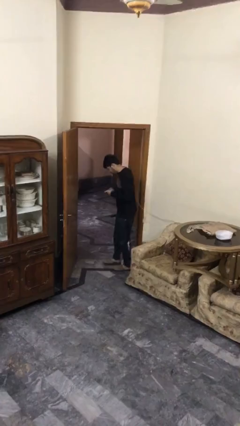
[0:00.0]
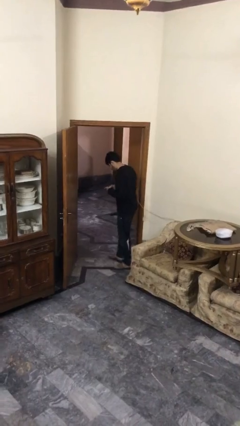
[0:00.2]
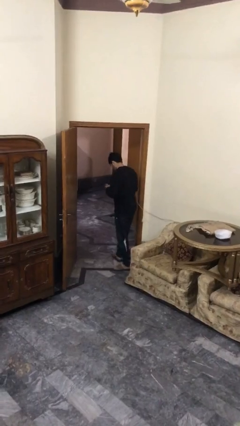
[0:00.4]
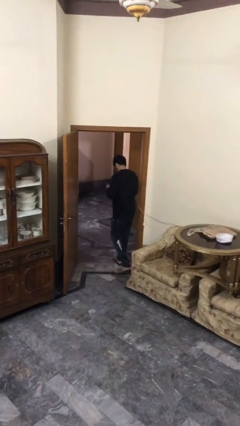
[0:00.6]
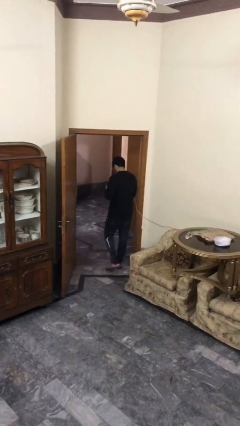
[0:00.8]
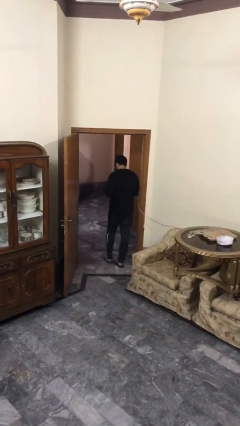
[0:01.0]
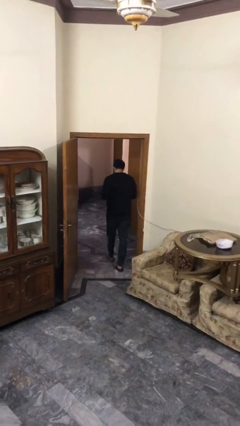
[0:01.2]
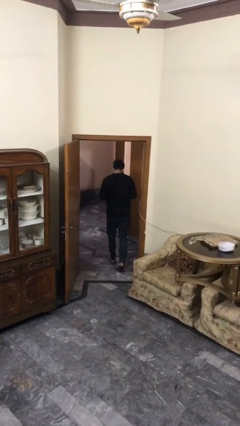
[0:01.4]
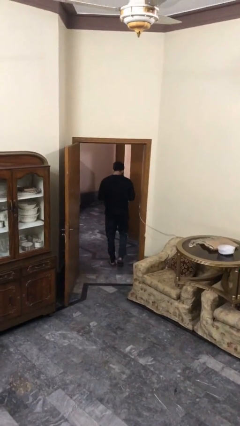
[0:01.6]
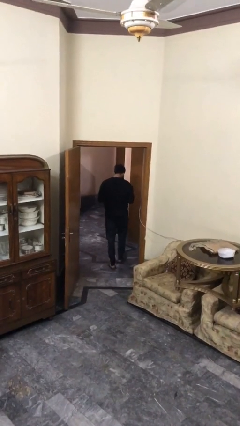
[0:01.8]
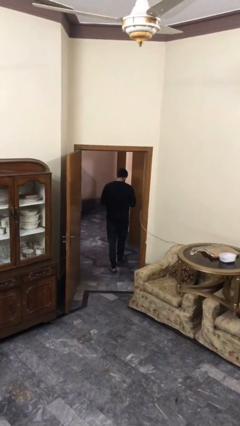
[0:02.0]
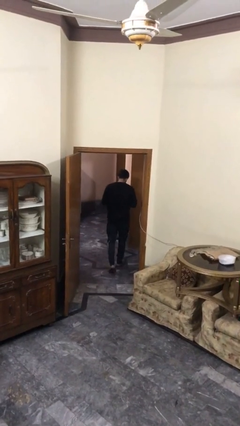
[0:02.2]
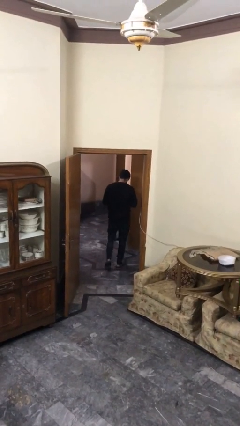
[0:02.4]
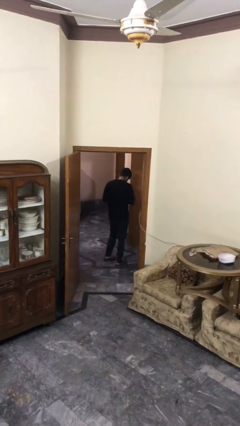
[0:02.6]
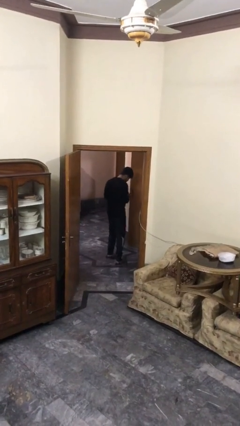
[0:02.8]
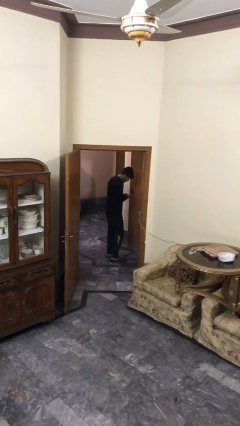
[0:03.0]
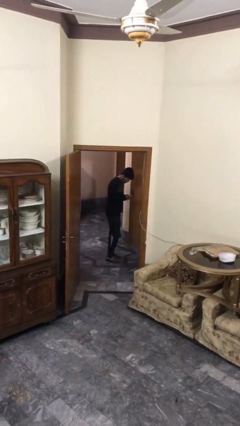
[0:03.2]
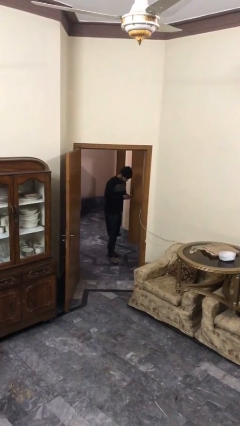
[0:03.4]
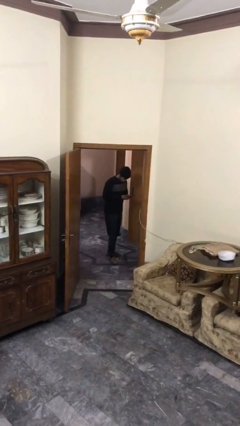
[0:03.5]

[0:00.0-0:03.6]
person exits scene through structure

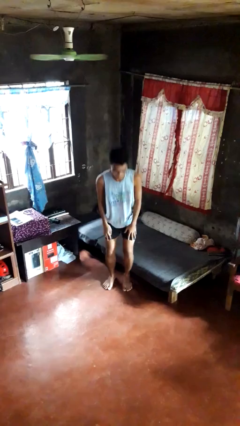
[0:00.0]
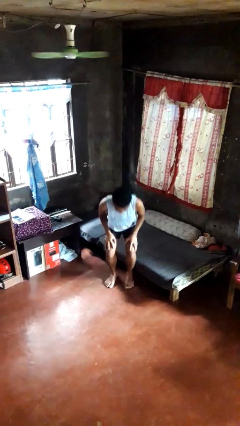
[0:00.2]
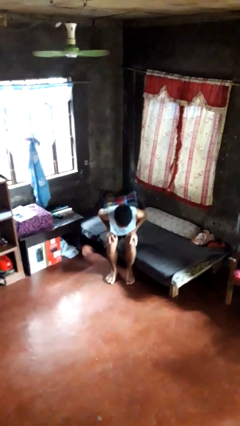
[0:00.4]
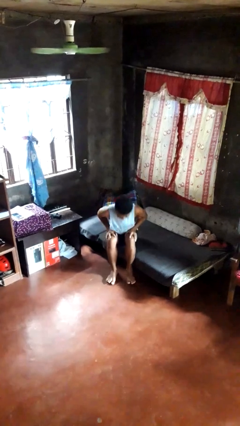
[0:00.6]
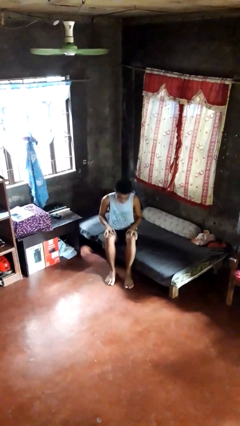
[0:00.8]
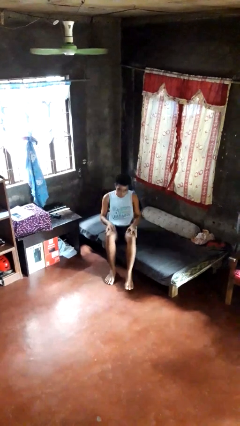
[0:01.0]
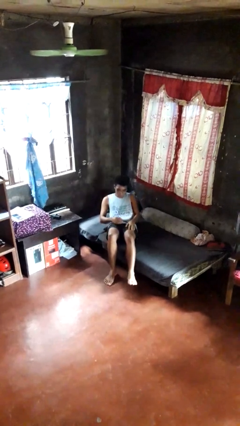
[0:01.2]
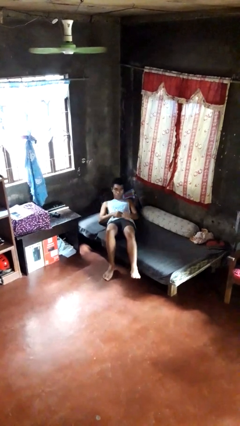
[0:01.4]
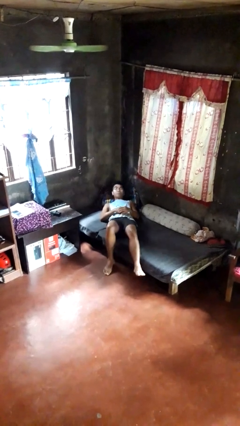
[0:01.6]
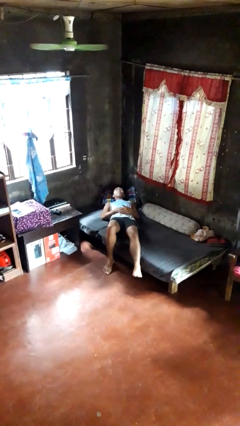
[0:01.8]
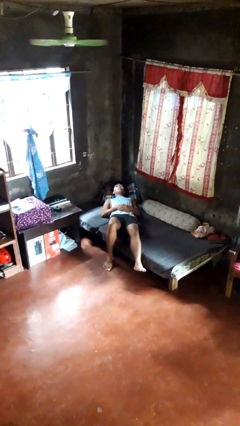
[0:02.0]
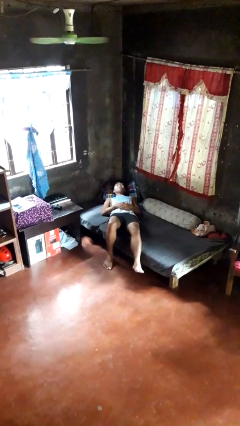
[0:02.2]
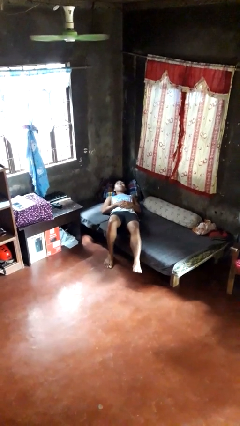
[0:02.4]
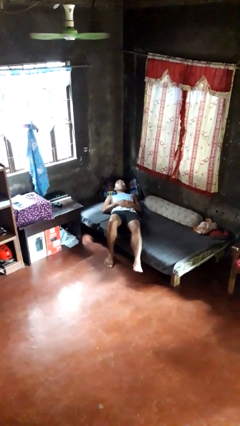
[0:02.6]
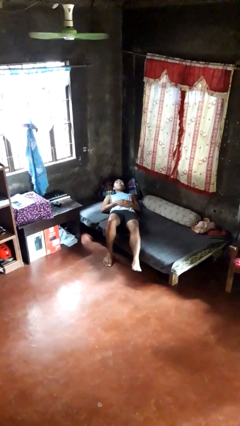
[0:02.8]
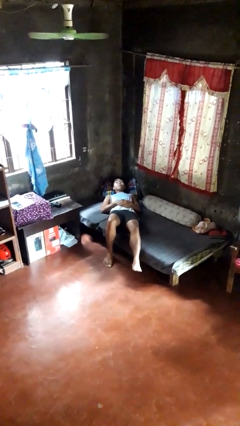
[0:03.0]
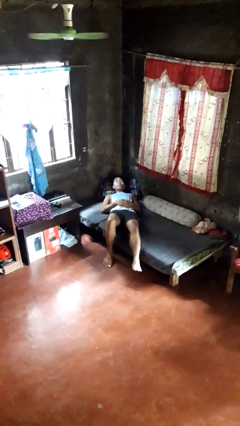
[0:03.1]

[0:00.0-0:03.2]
person lies down on bed

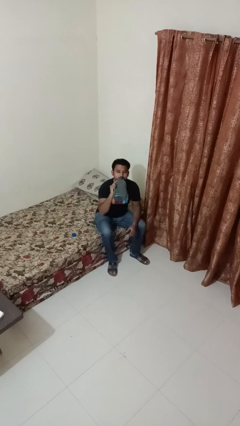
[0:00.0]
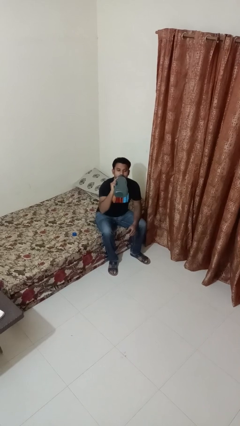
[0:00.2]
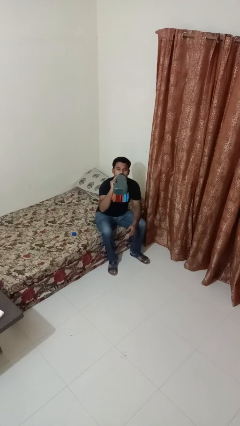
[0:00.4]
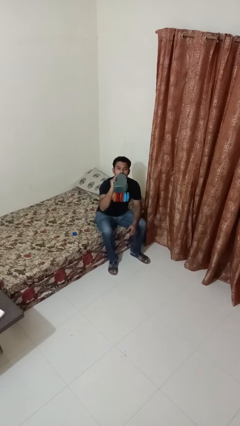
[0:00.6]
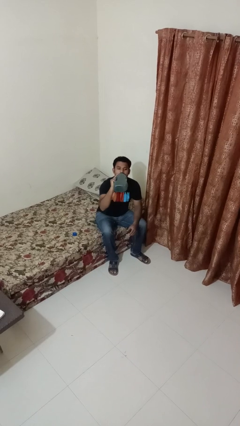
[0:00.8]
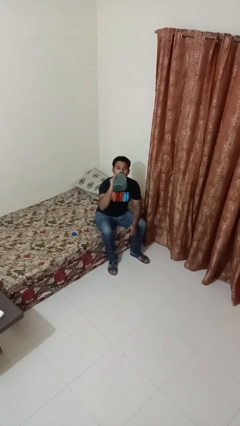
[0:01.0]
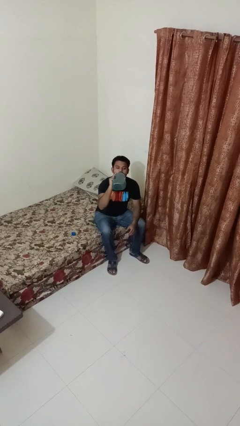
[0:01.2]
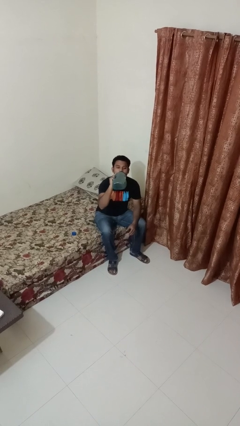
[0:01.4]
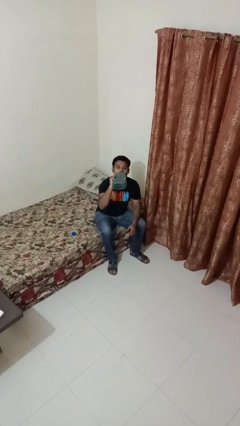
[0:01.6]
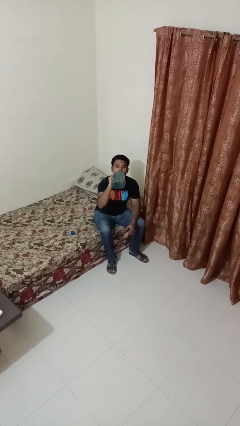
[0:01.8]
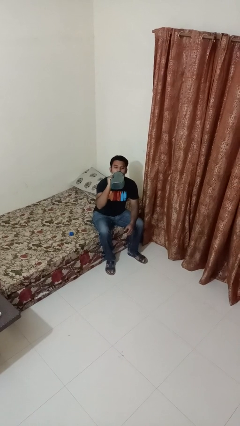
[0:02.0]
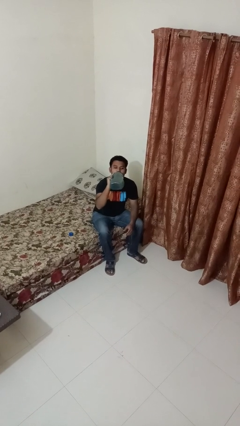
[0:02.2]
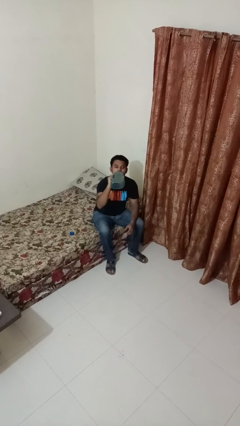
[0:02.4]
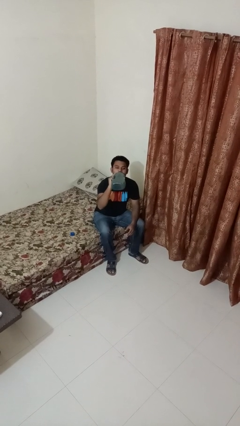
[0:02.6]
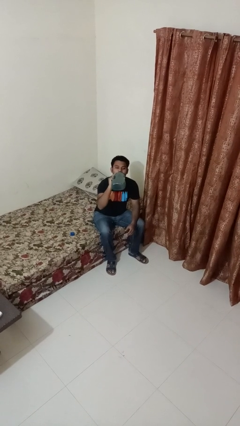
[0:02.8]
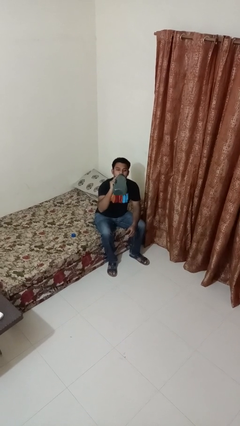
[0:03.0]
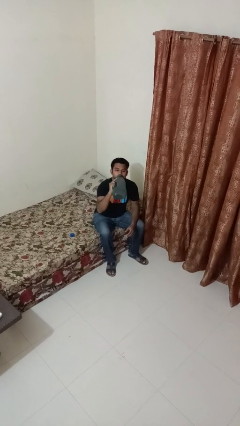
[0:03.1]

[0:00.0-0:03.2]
person drinks from bottle

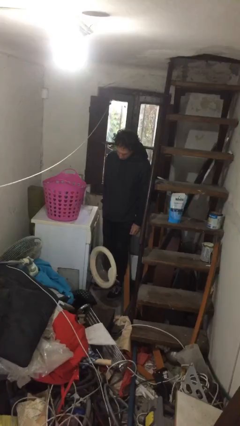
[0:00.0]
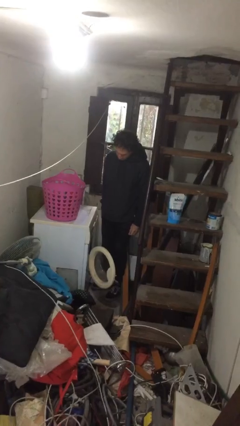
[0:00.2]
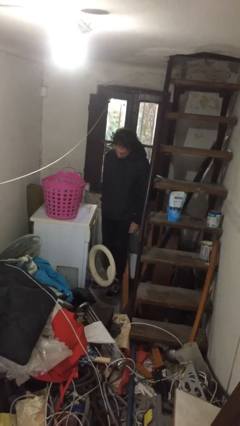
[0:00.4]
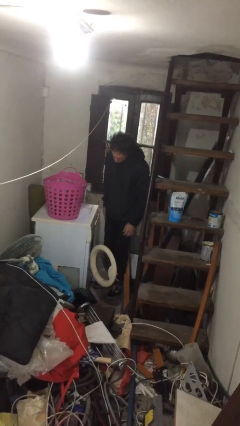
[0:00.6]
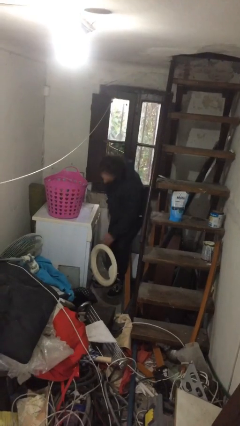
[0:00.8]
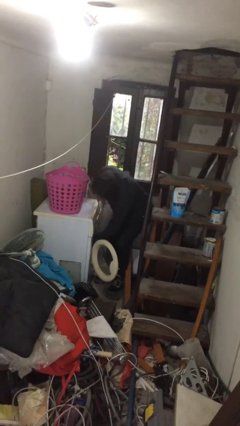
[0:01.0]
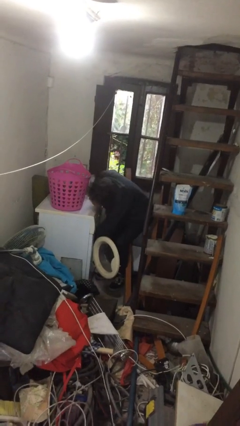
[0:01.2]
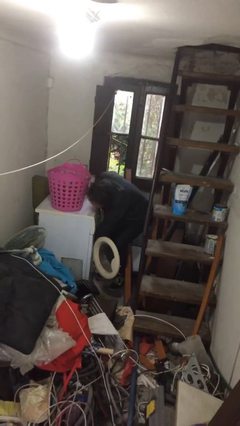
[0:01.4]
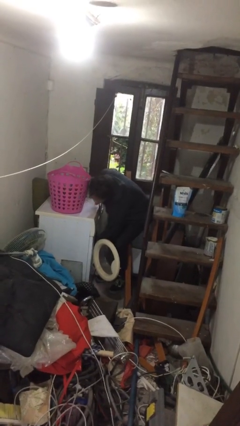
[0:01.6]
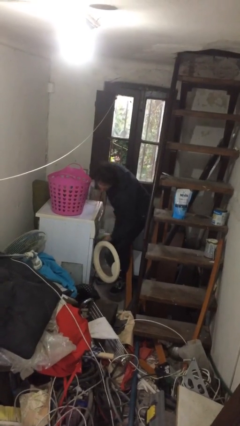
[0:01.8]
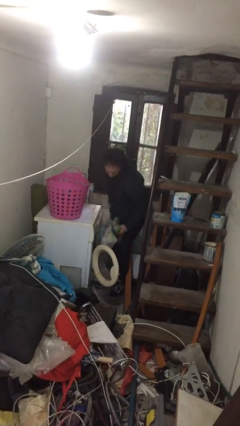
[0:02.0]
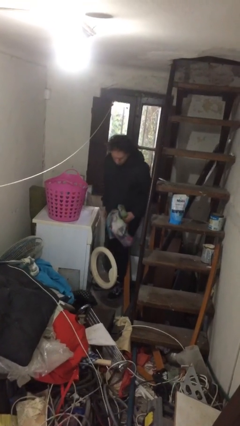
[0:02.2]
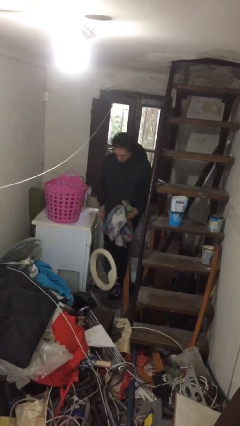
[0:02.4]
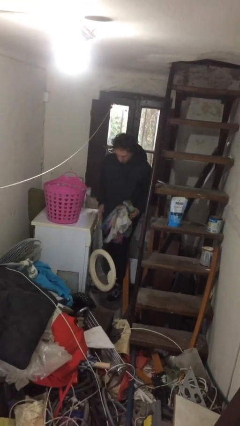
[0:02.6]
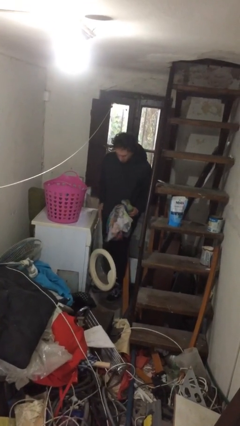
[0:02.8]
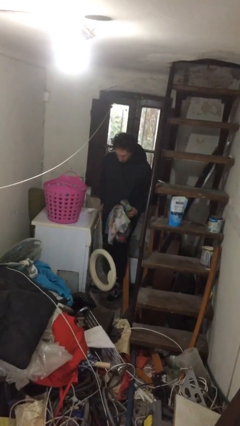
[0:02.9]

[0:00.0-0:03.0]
person unloads clotheswasher

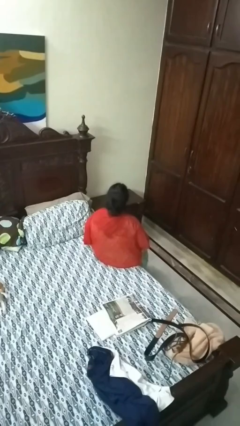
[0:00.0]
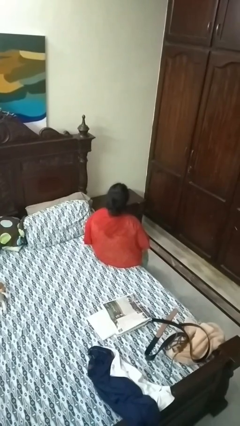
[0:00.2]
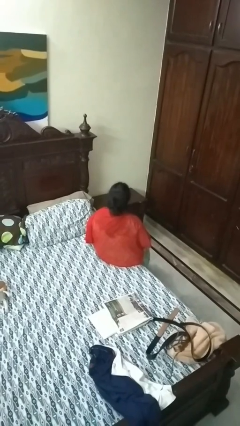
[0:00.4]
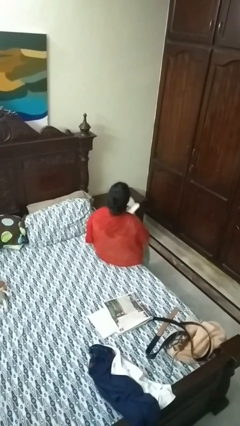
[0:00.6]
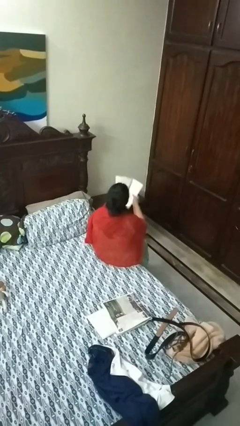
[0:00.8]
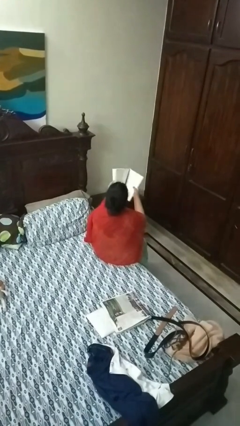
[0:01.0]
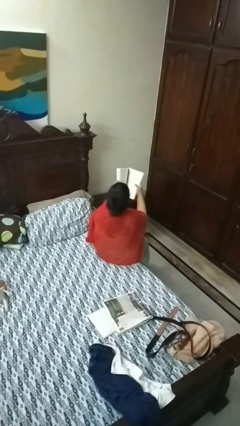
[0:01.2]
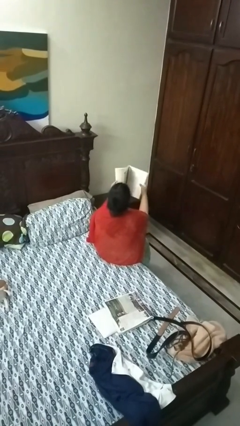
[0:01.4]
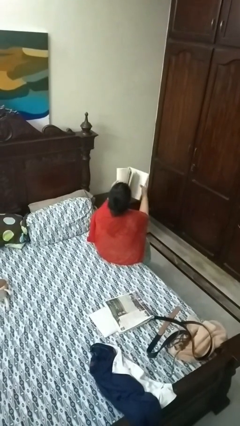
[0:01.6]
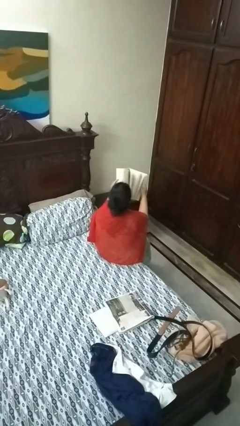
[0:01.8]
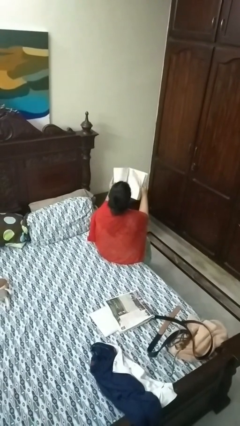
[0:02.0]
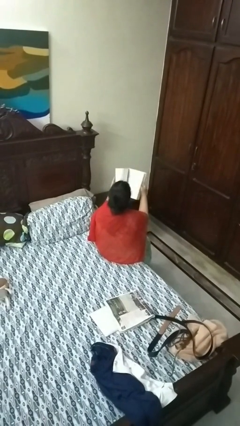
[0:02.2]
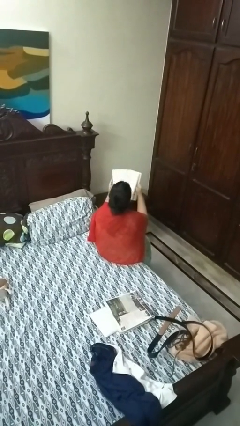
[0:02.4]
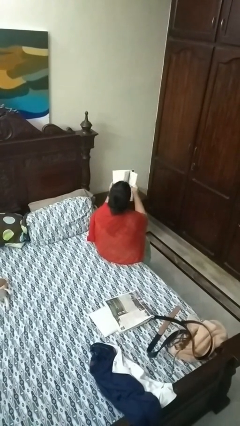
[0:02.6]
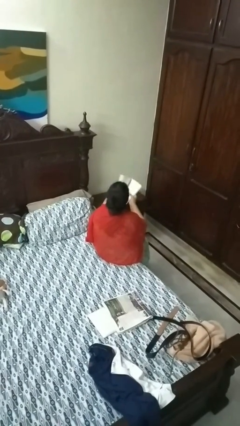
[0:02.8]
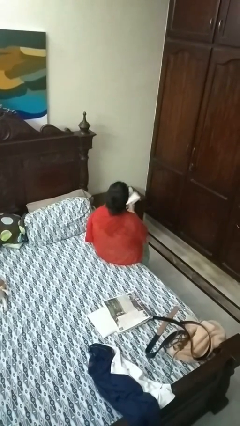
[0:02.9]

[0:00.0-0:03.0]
person reads magazine

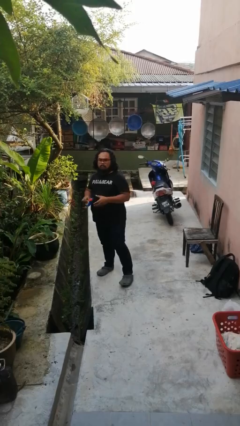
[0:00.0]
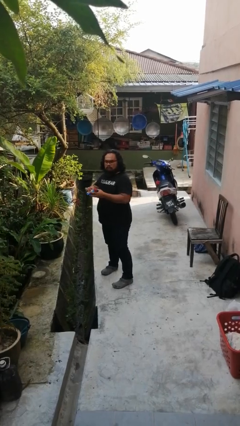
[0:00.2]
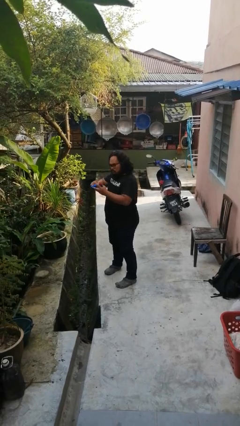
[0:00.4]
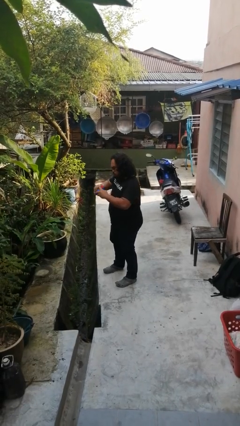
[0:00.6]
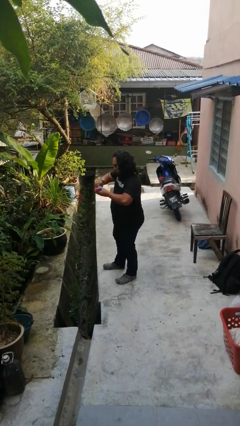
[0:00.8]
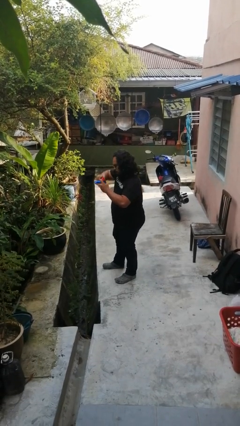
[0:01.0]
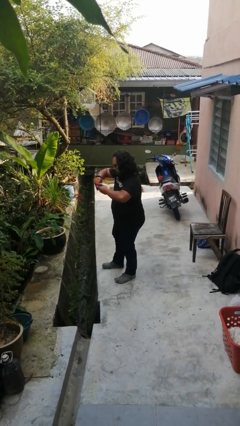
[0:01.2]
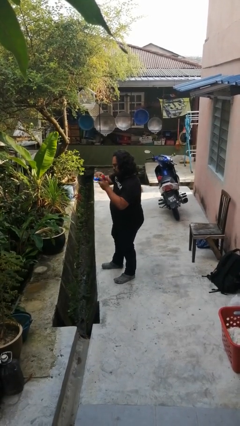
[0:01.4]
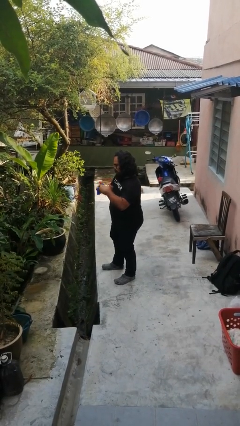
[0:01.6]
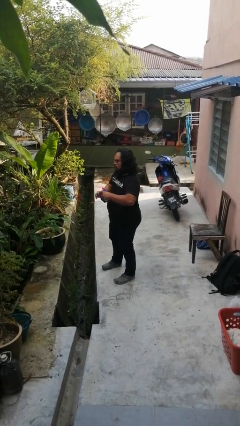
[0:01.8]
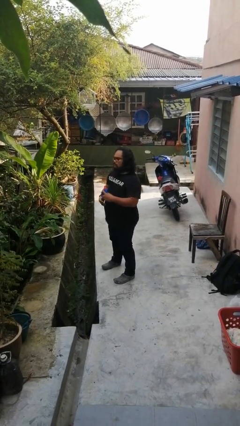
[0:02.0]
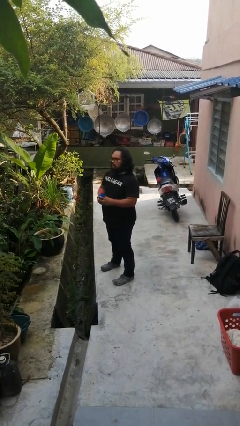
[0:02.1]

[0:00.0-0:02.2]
person squeezes object
